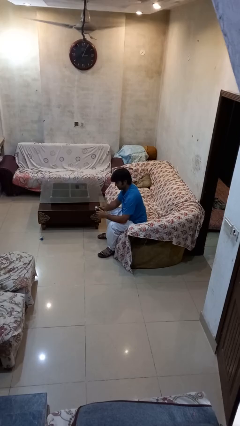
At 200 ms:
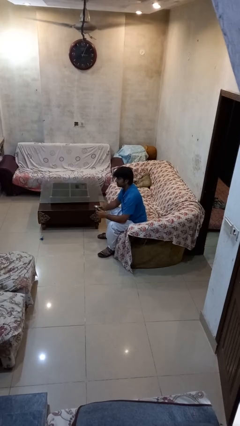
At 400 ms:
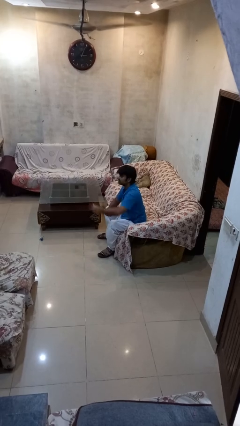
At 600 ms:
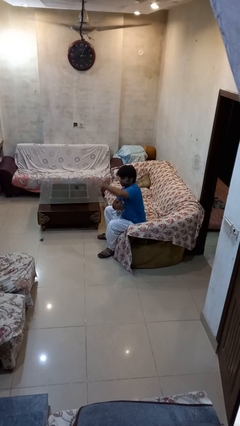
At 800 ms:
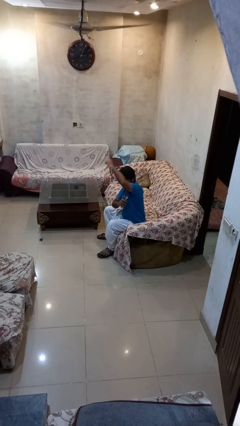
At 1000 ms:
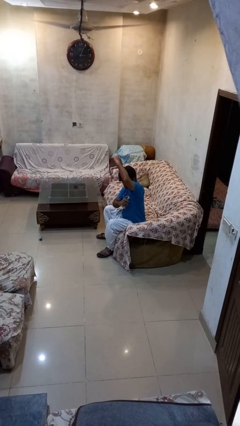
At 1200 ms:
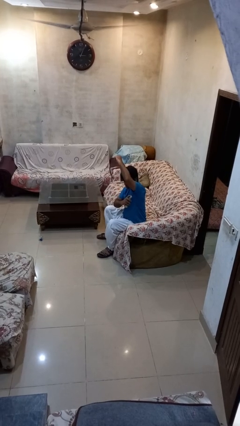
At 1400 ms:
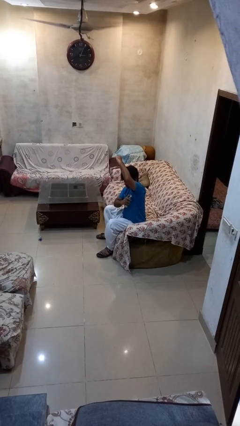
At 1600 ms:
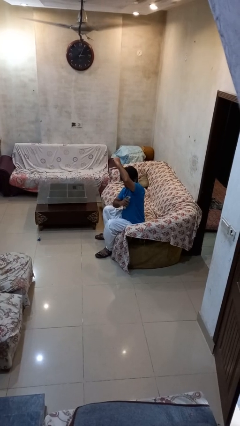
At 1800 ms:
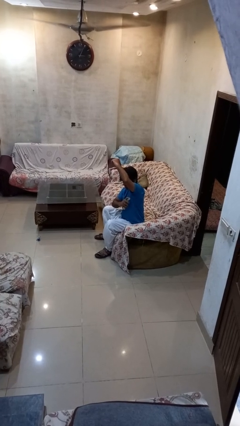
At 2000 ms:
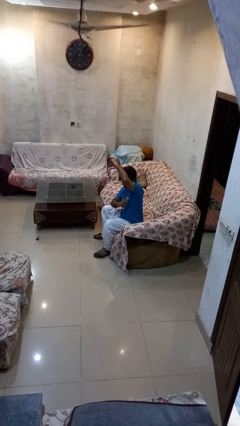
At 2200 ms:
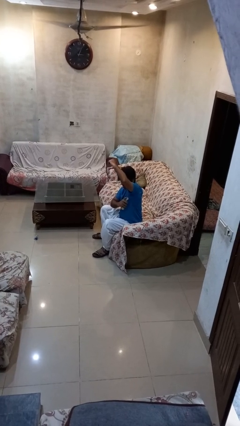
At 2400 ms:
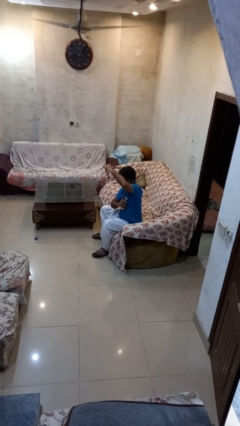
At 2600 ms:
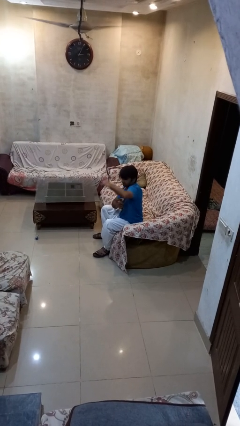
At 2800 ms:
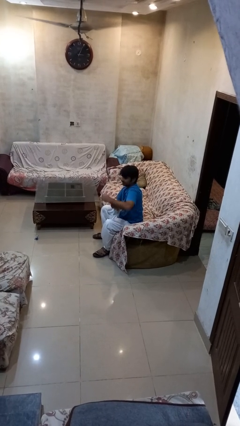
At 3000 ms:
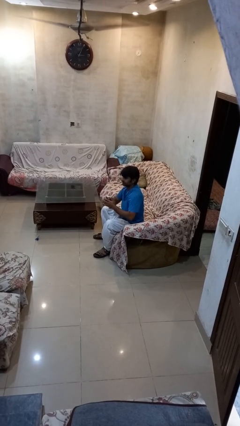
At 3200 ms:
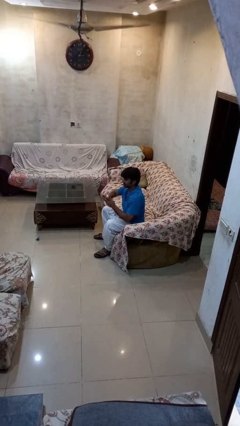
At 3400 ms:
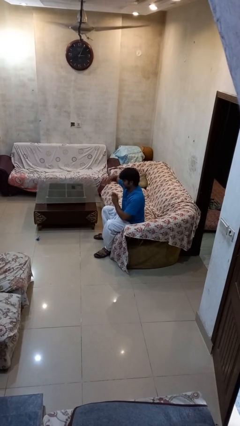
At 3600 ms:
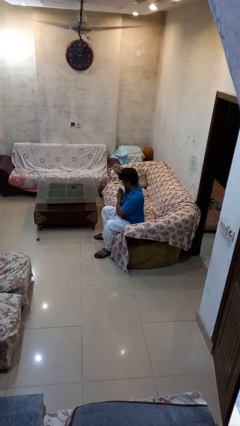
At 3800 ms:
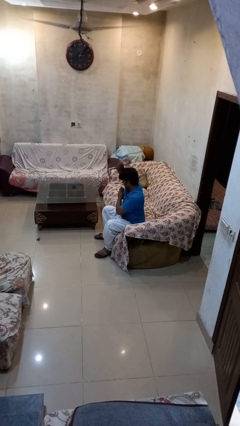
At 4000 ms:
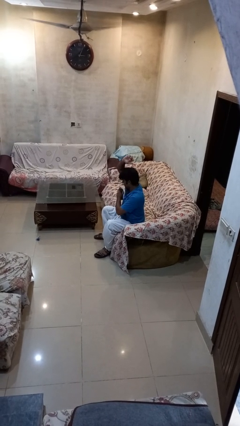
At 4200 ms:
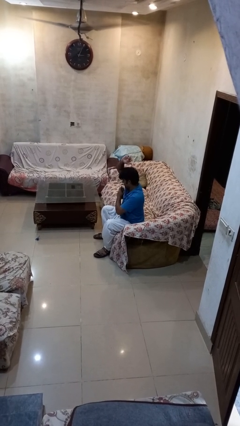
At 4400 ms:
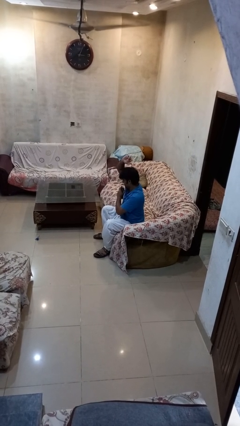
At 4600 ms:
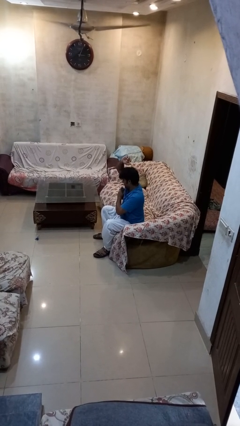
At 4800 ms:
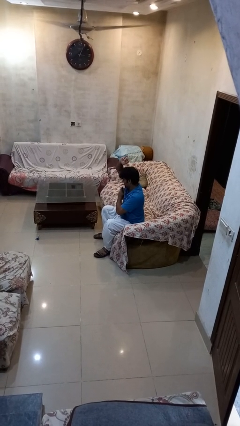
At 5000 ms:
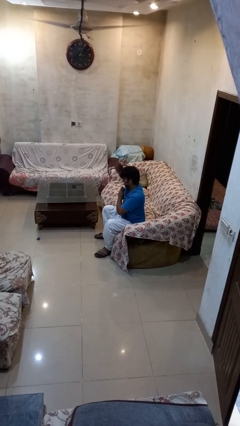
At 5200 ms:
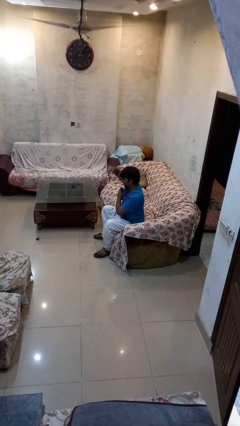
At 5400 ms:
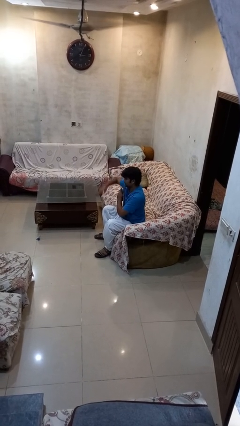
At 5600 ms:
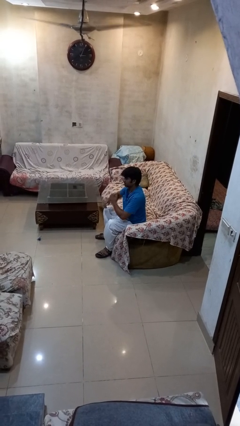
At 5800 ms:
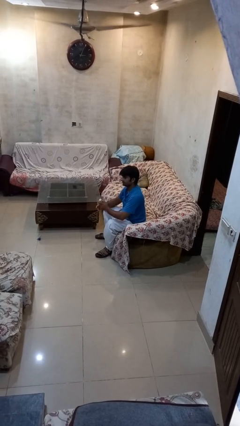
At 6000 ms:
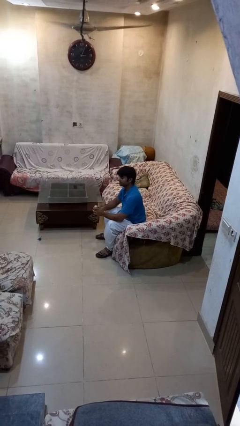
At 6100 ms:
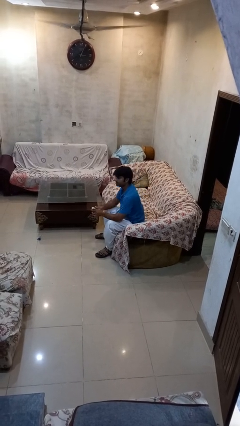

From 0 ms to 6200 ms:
person applies deodorant

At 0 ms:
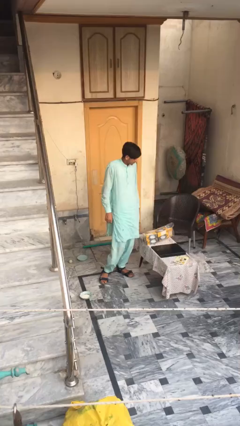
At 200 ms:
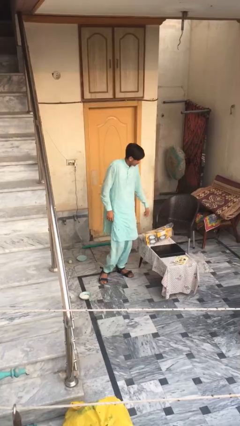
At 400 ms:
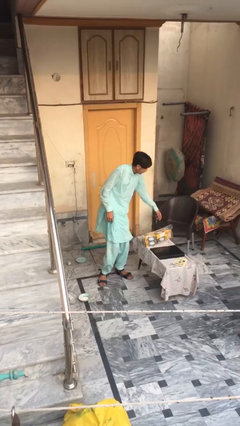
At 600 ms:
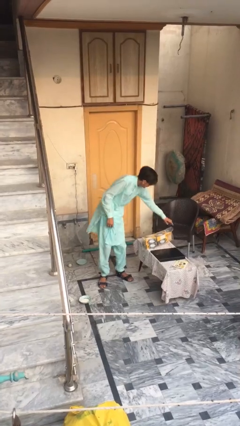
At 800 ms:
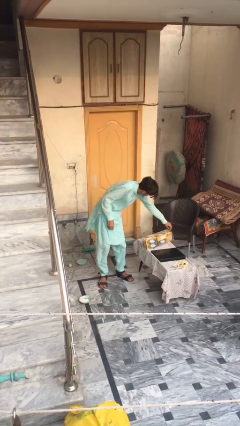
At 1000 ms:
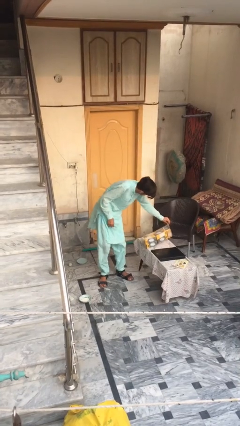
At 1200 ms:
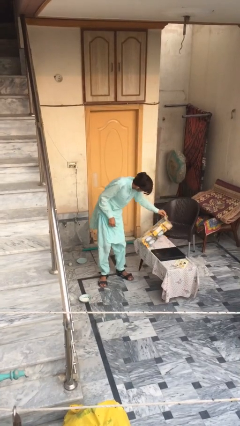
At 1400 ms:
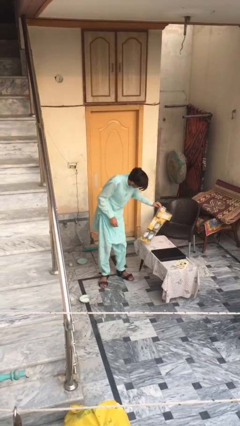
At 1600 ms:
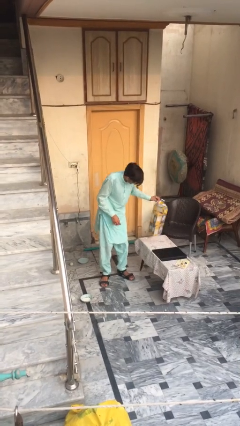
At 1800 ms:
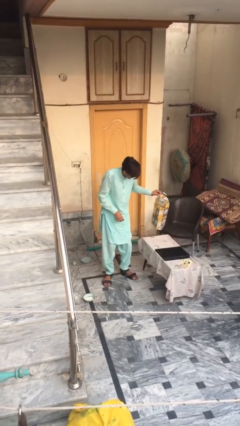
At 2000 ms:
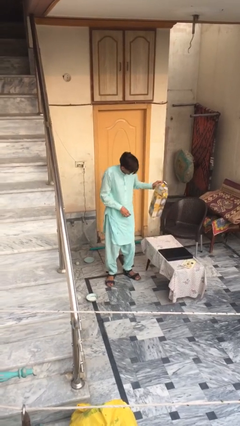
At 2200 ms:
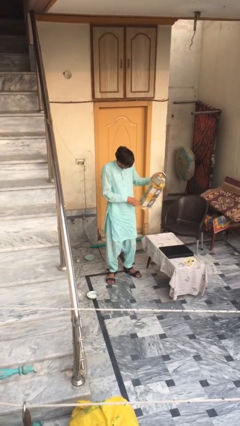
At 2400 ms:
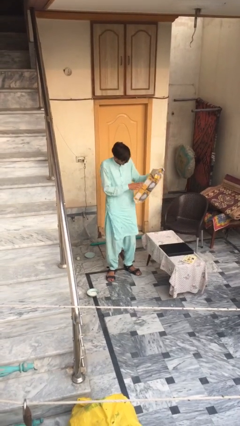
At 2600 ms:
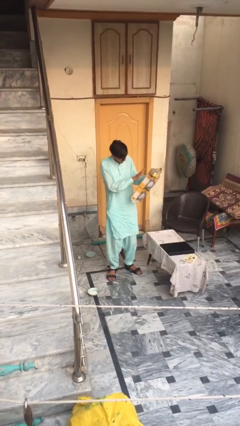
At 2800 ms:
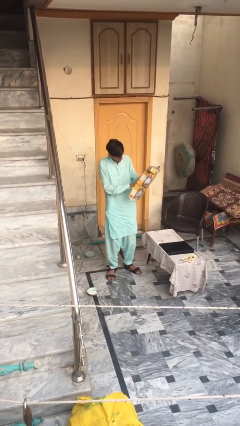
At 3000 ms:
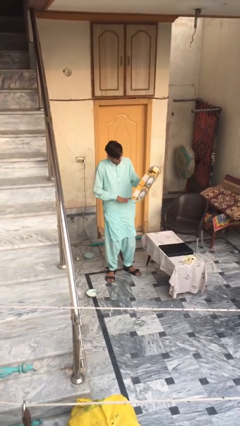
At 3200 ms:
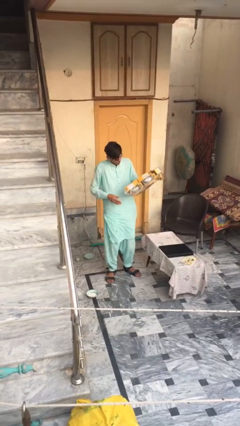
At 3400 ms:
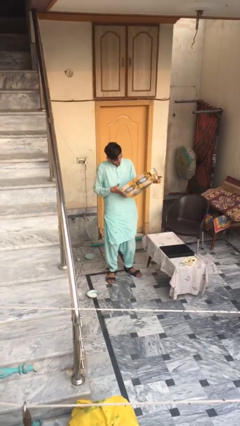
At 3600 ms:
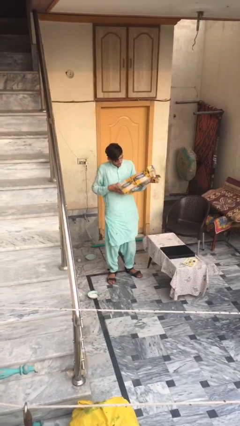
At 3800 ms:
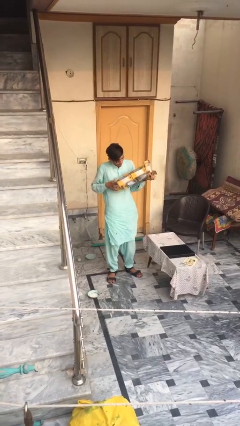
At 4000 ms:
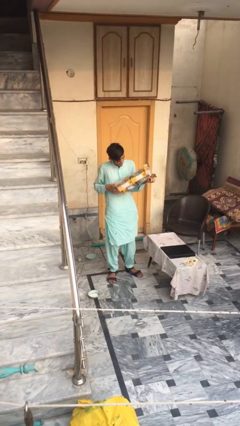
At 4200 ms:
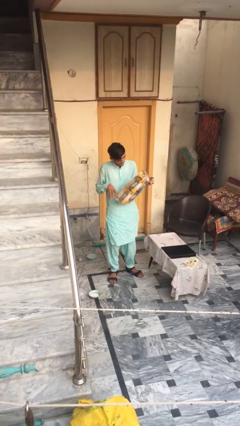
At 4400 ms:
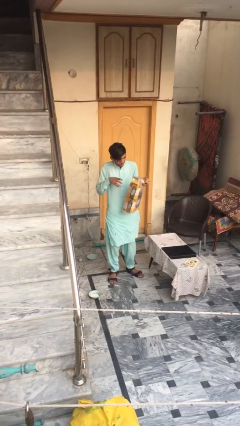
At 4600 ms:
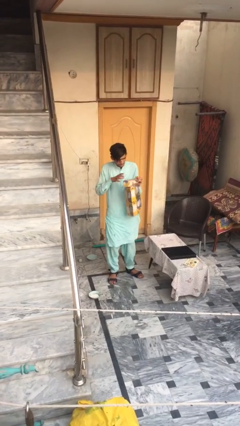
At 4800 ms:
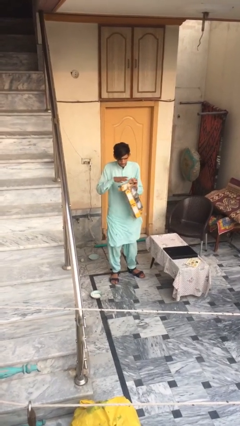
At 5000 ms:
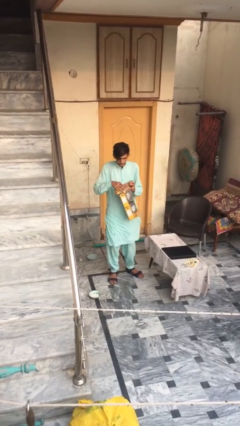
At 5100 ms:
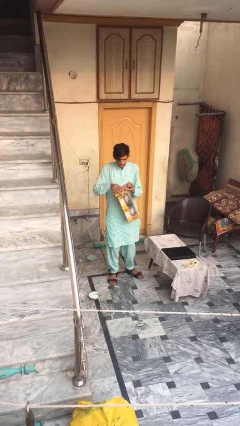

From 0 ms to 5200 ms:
person picks up object from table

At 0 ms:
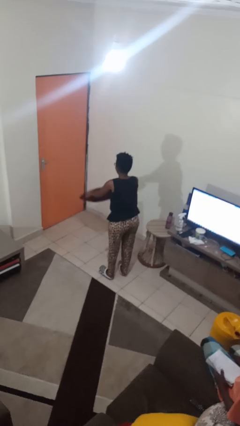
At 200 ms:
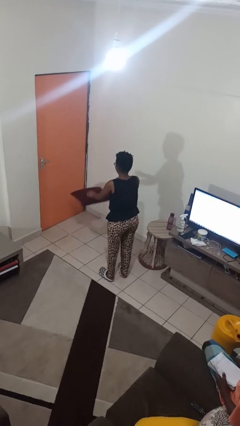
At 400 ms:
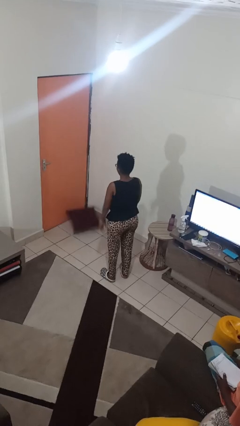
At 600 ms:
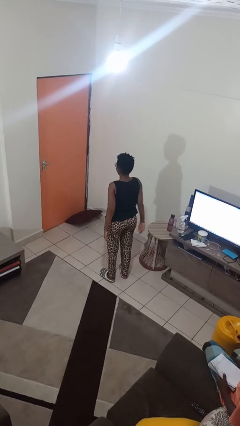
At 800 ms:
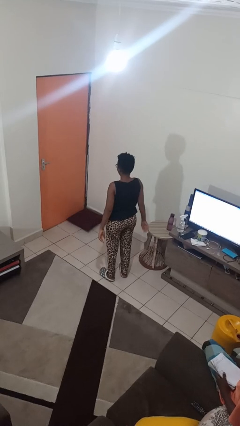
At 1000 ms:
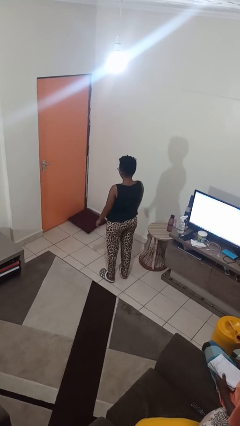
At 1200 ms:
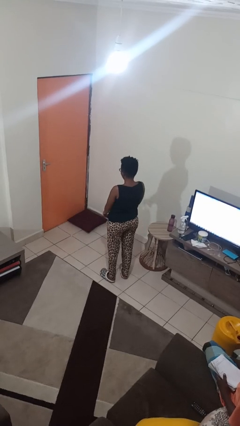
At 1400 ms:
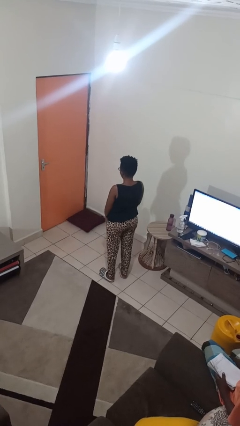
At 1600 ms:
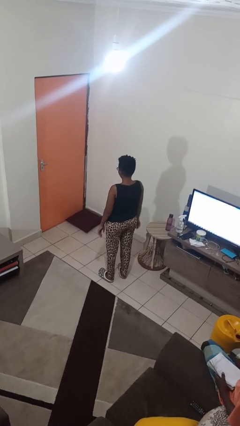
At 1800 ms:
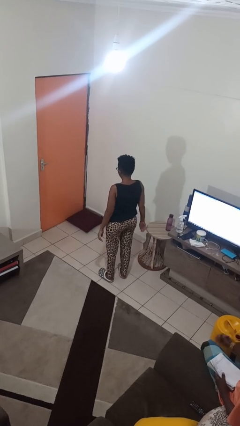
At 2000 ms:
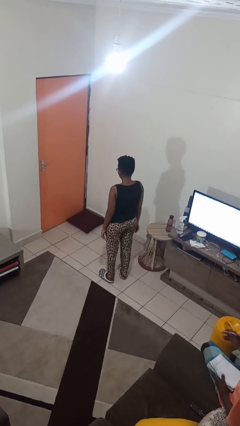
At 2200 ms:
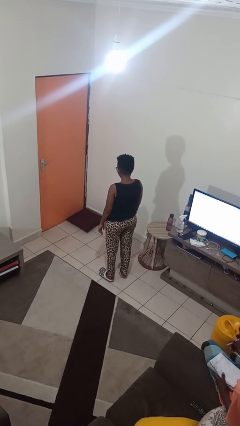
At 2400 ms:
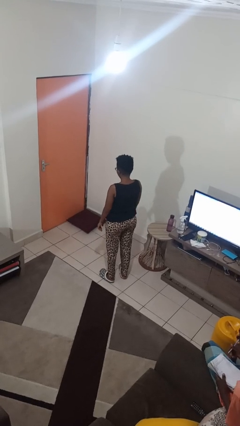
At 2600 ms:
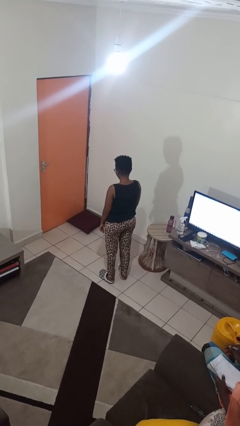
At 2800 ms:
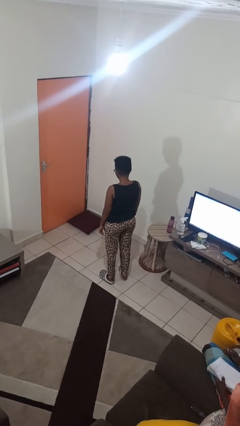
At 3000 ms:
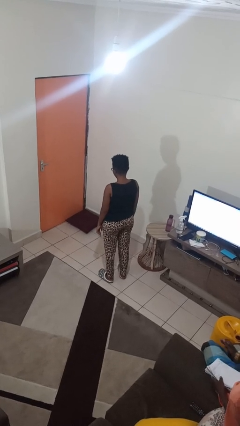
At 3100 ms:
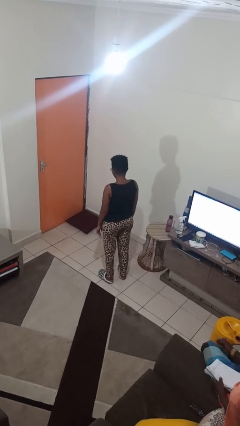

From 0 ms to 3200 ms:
person throws object to ground

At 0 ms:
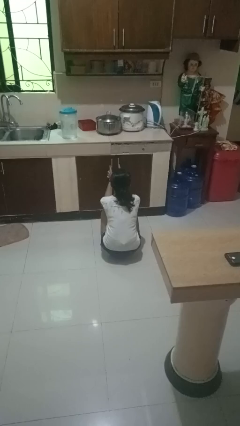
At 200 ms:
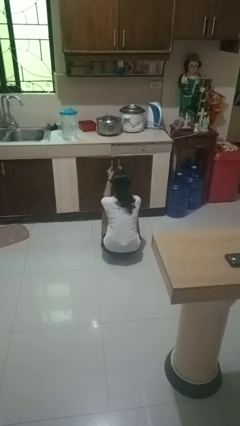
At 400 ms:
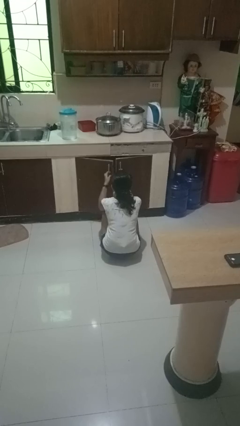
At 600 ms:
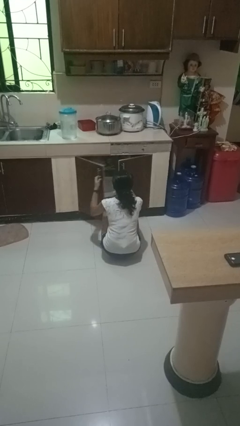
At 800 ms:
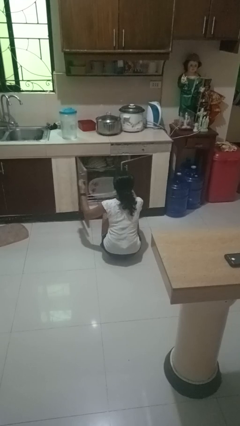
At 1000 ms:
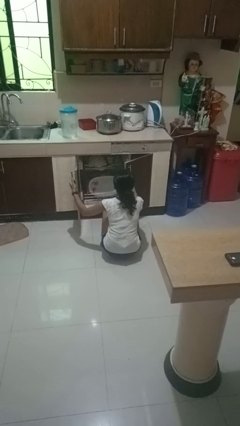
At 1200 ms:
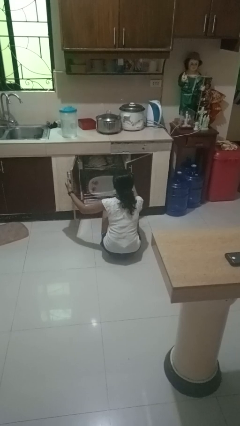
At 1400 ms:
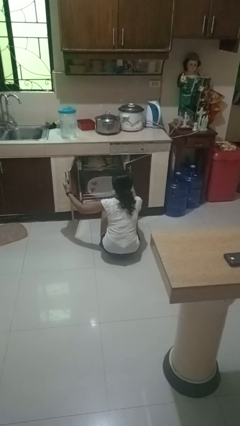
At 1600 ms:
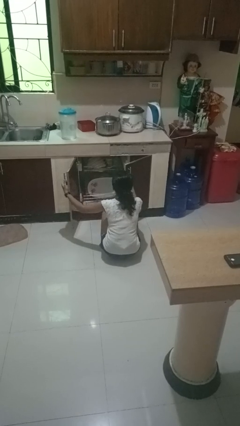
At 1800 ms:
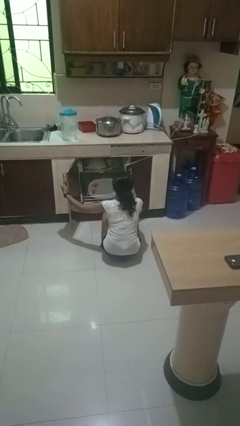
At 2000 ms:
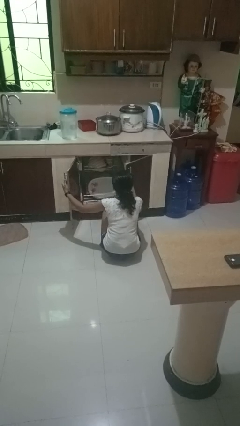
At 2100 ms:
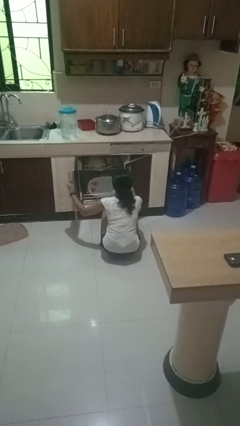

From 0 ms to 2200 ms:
person opens dishwasher

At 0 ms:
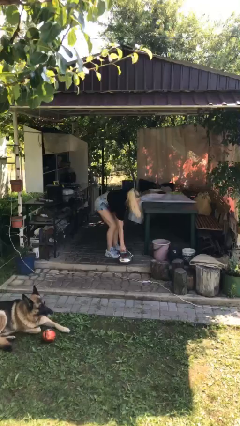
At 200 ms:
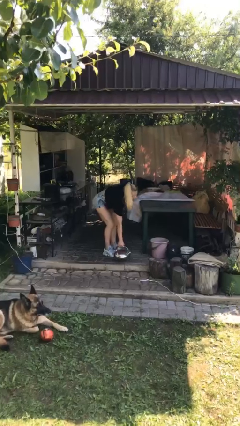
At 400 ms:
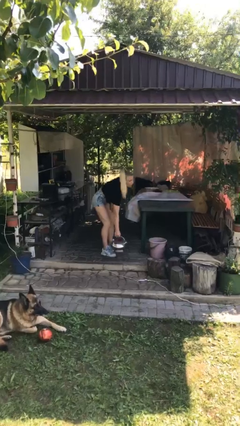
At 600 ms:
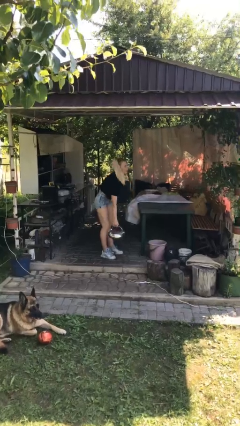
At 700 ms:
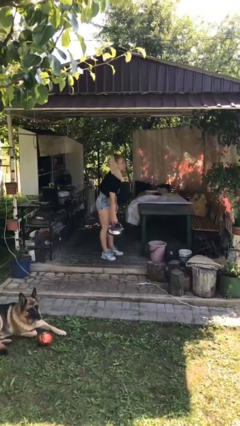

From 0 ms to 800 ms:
person picks up object from floor
